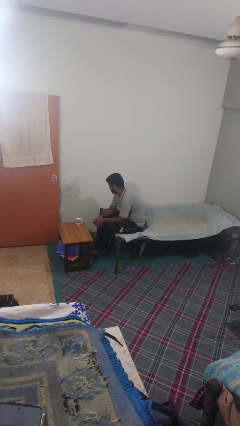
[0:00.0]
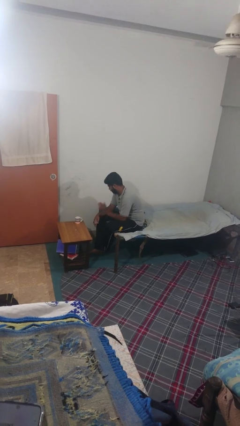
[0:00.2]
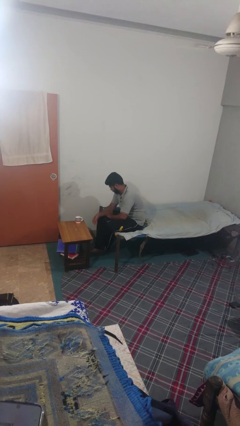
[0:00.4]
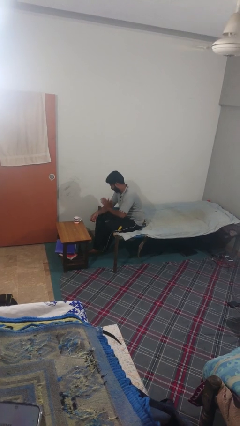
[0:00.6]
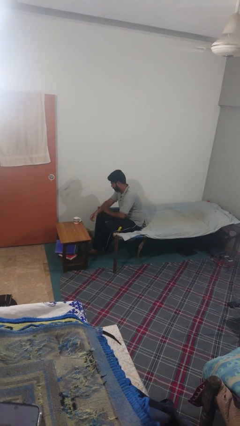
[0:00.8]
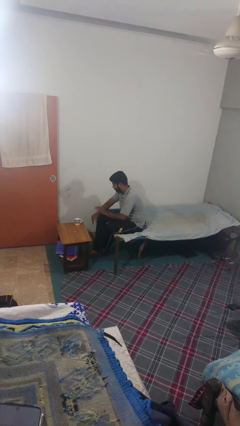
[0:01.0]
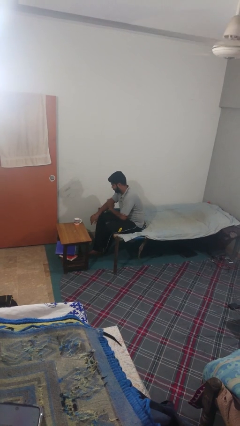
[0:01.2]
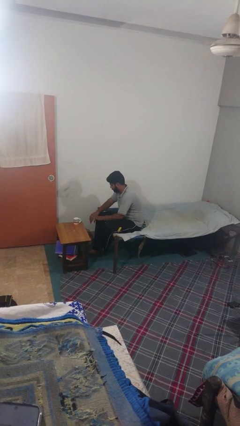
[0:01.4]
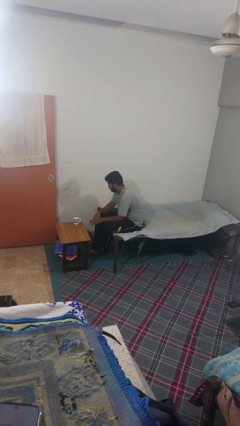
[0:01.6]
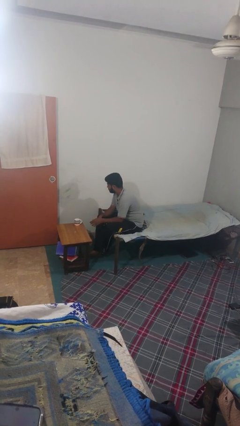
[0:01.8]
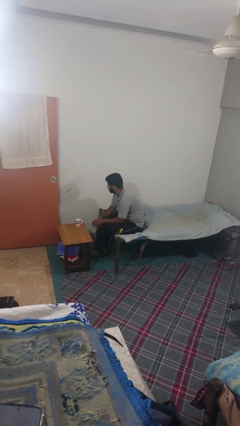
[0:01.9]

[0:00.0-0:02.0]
person swats bug

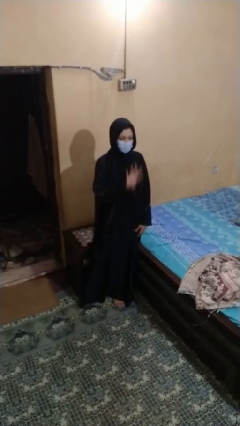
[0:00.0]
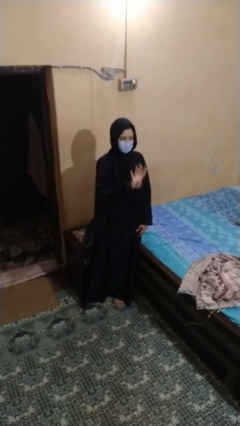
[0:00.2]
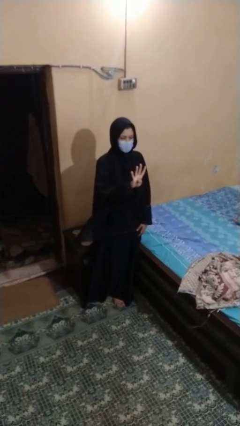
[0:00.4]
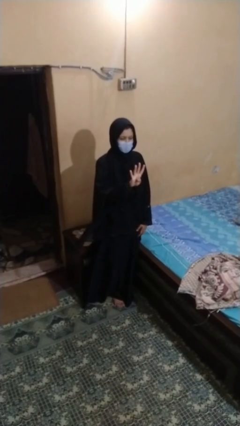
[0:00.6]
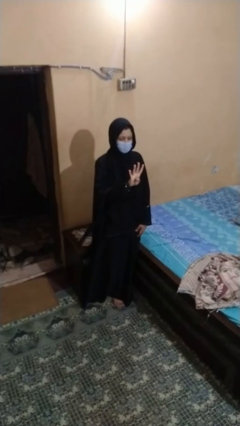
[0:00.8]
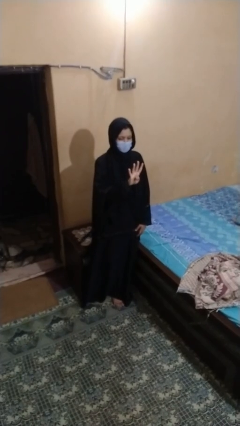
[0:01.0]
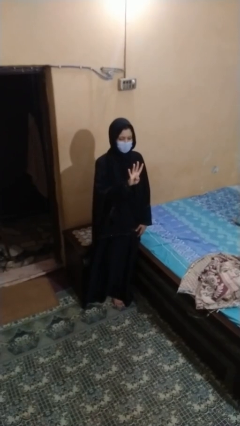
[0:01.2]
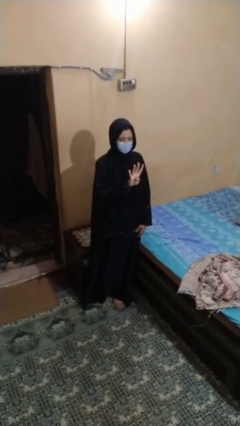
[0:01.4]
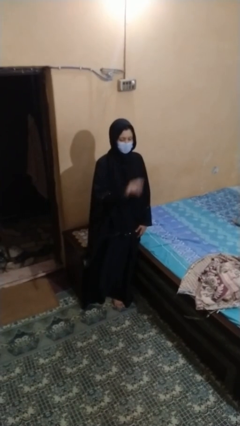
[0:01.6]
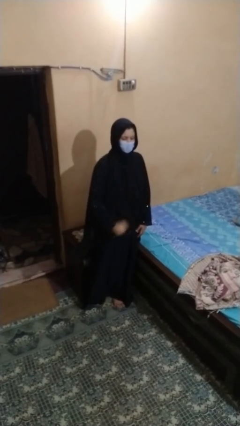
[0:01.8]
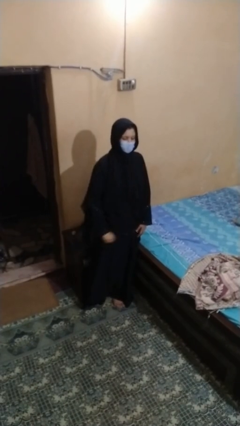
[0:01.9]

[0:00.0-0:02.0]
person gestures number four

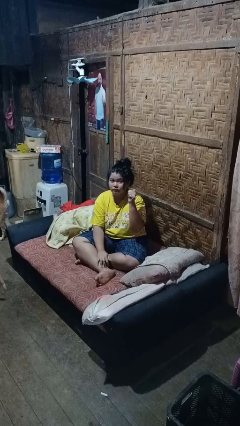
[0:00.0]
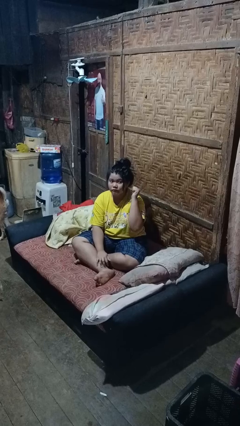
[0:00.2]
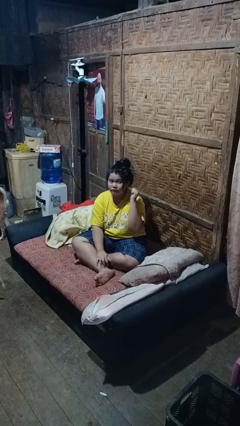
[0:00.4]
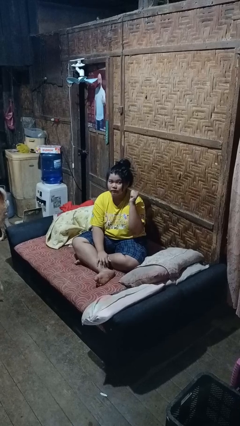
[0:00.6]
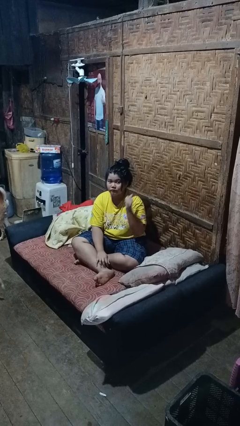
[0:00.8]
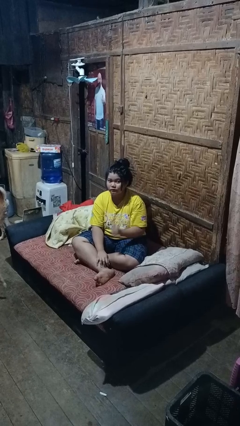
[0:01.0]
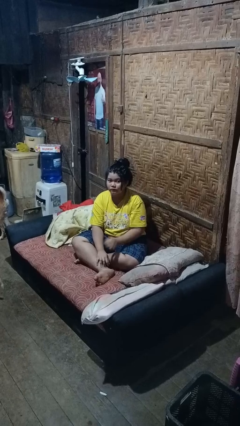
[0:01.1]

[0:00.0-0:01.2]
person gestures behind me

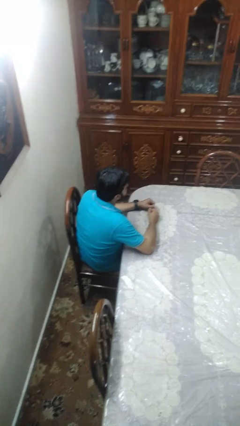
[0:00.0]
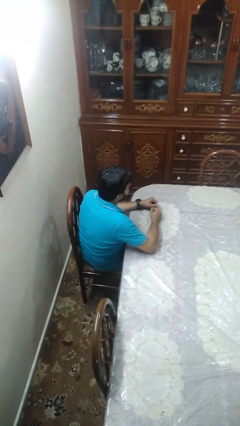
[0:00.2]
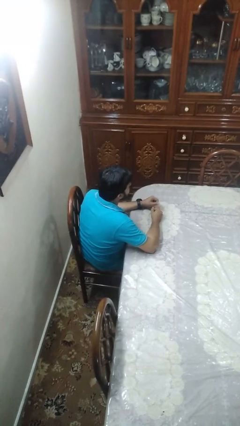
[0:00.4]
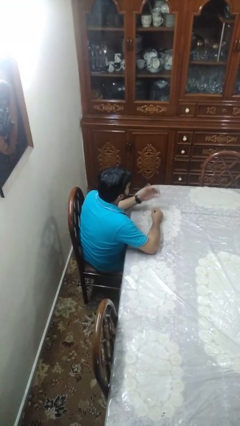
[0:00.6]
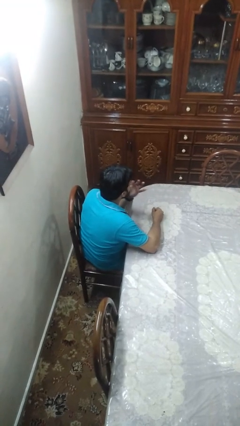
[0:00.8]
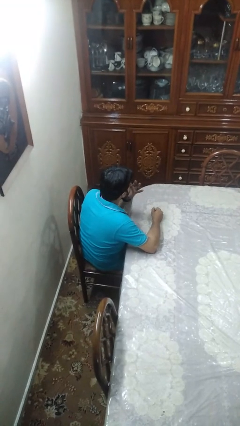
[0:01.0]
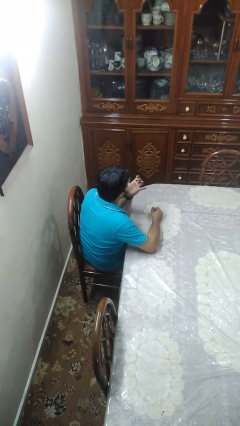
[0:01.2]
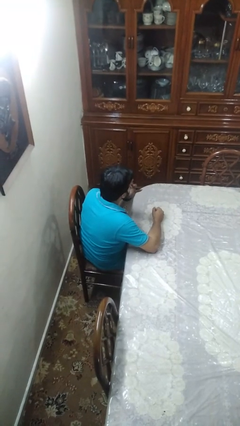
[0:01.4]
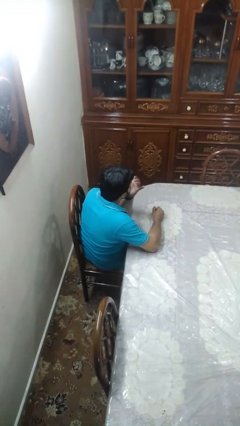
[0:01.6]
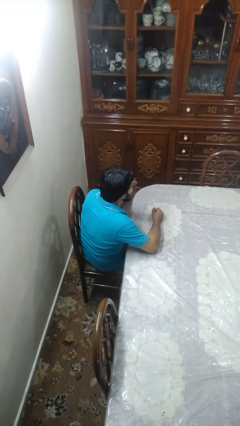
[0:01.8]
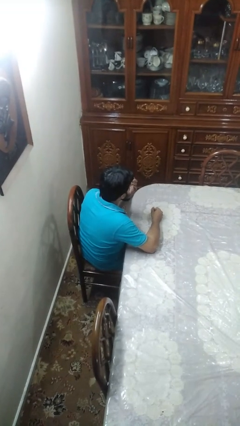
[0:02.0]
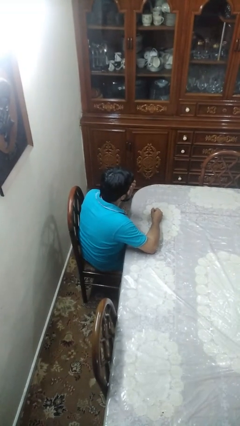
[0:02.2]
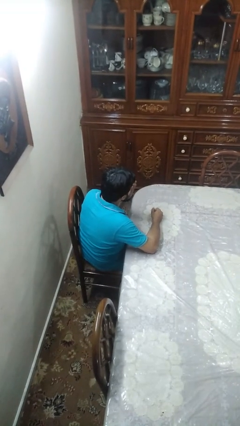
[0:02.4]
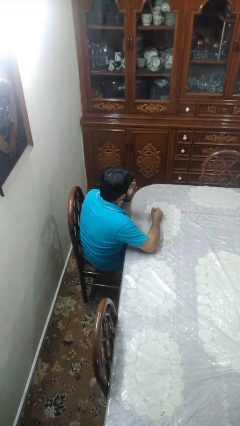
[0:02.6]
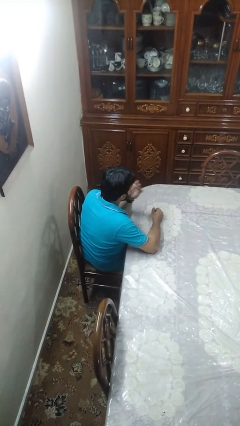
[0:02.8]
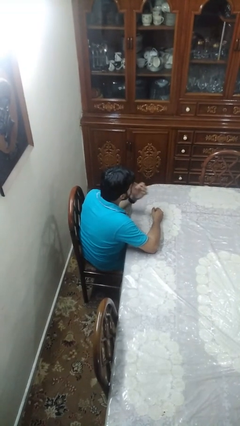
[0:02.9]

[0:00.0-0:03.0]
person licks fingers

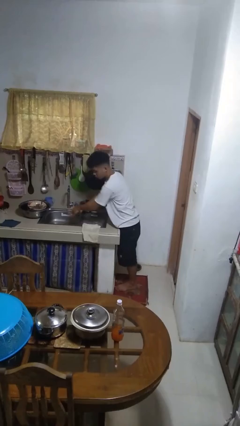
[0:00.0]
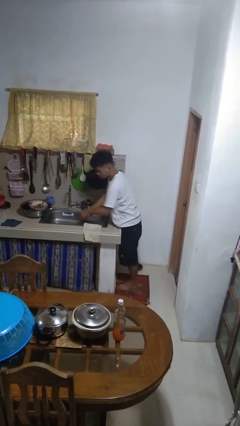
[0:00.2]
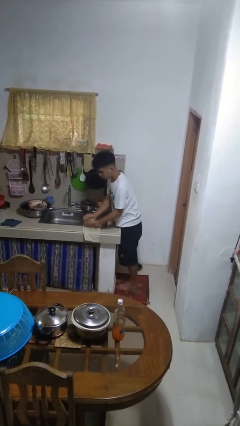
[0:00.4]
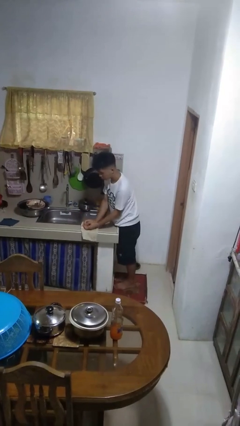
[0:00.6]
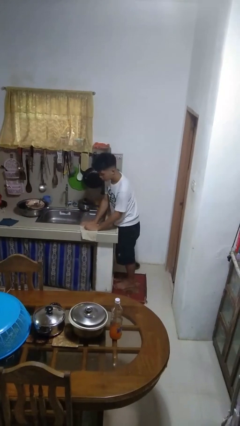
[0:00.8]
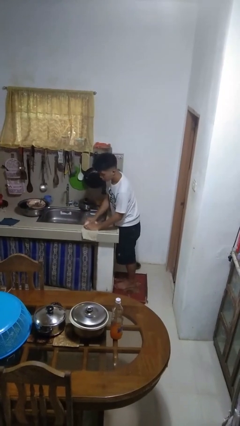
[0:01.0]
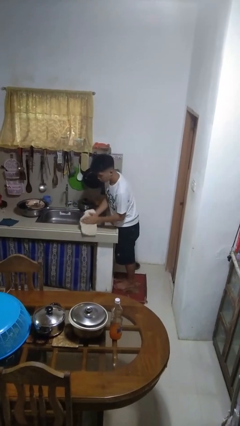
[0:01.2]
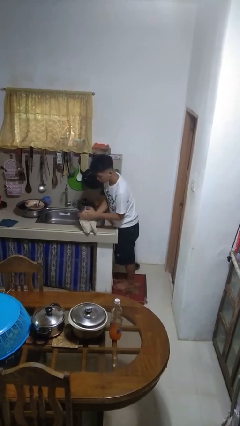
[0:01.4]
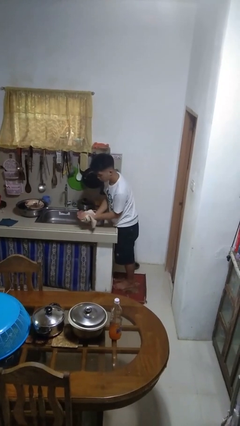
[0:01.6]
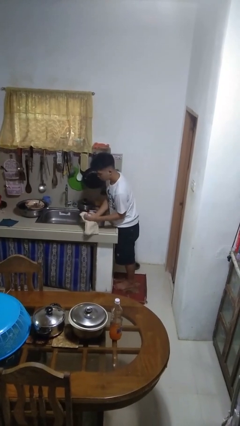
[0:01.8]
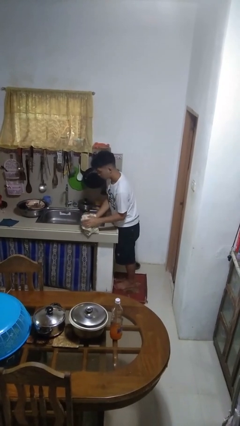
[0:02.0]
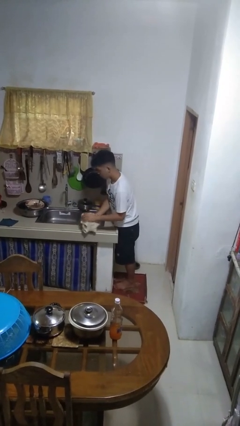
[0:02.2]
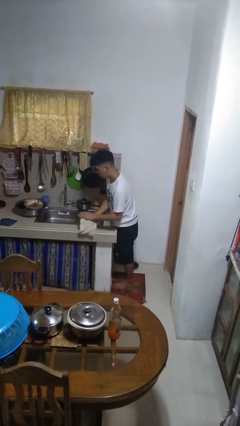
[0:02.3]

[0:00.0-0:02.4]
person dries hands with towel

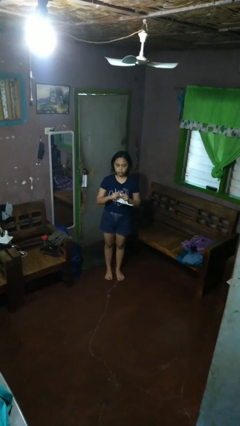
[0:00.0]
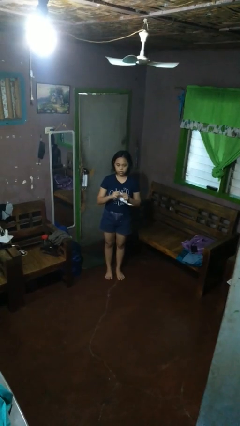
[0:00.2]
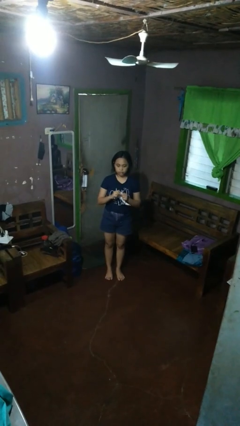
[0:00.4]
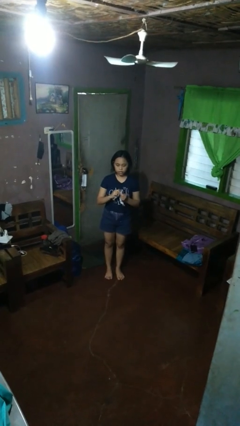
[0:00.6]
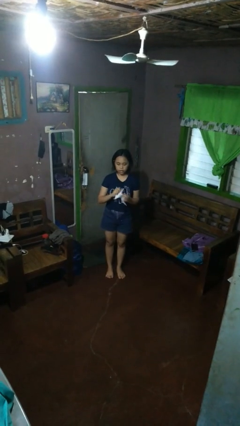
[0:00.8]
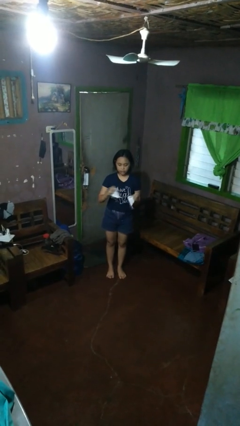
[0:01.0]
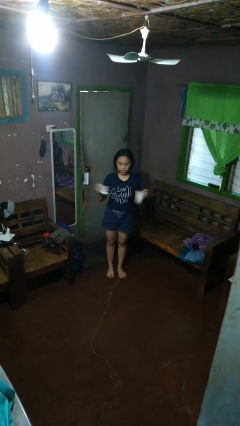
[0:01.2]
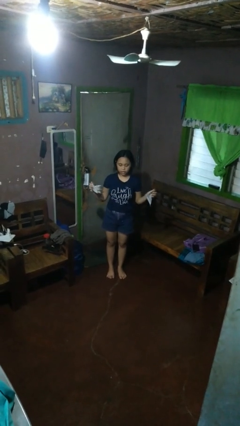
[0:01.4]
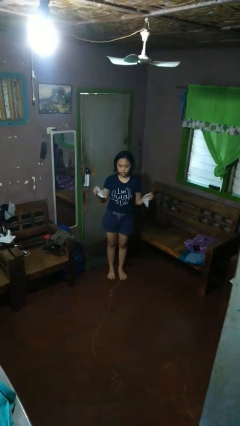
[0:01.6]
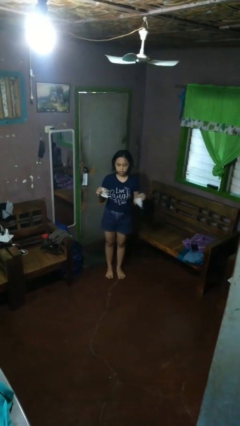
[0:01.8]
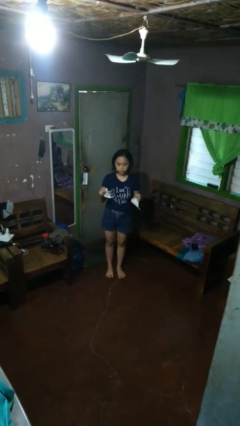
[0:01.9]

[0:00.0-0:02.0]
person tears paper

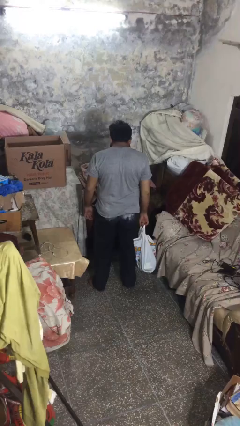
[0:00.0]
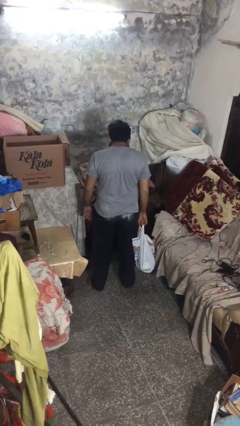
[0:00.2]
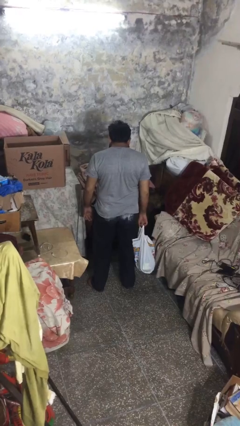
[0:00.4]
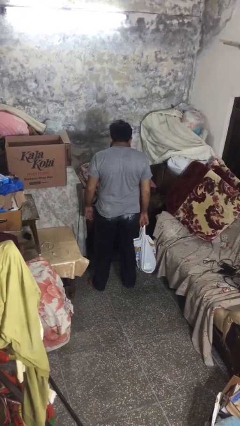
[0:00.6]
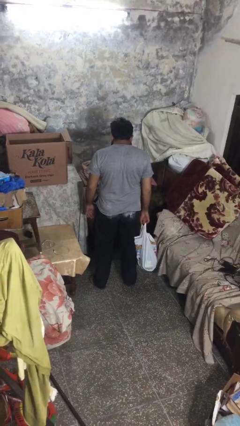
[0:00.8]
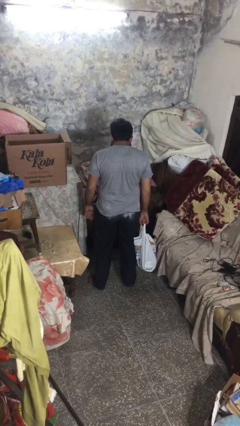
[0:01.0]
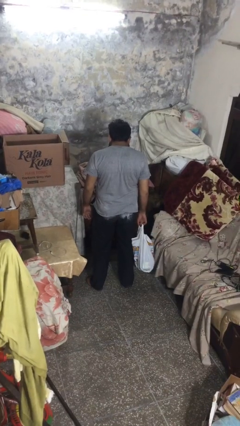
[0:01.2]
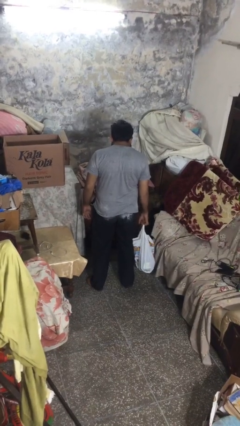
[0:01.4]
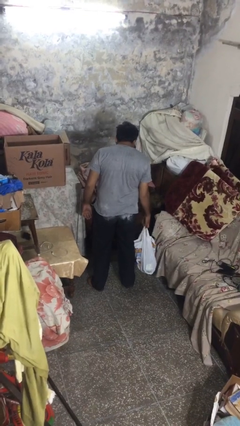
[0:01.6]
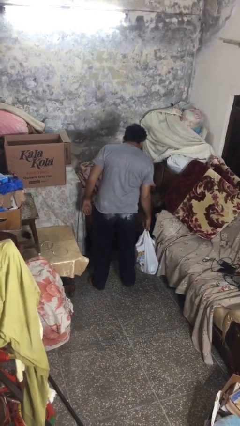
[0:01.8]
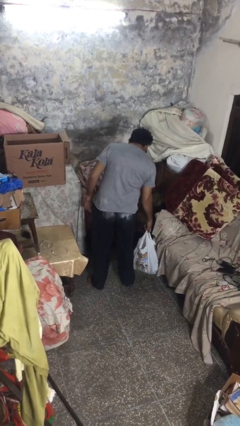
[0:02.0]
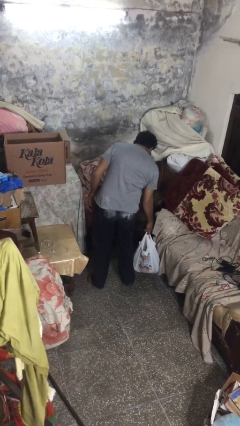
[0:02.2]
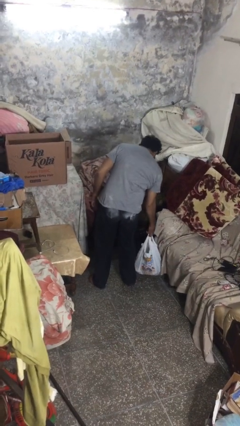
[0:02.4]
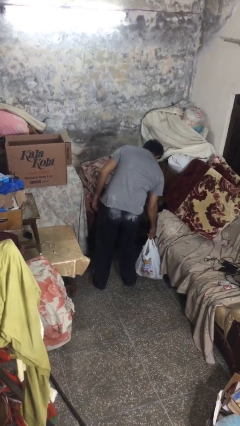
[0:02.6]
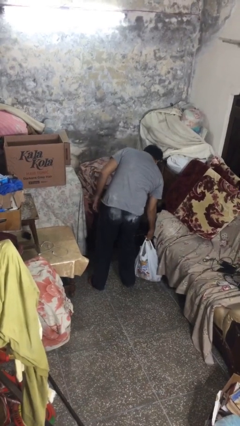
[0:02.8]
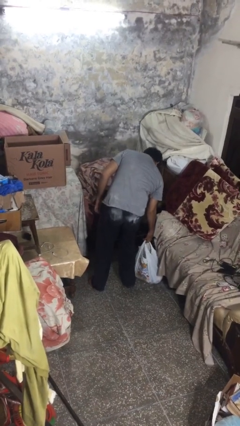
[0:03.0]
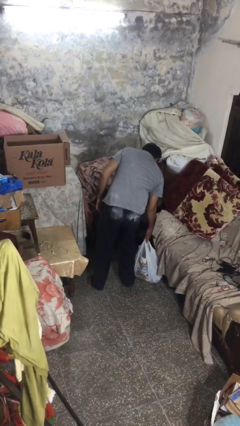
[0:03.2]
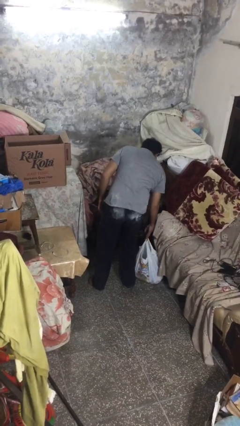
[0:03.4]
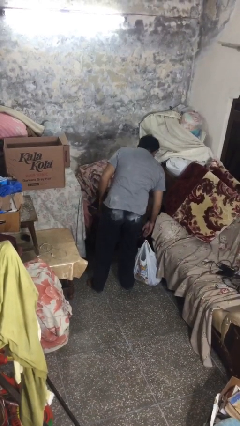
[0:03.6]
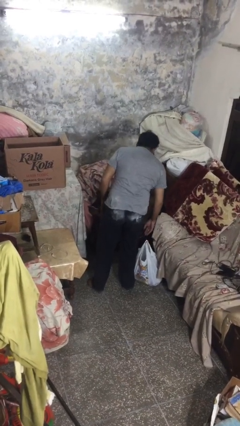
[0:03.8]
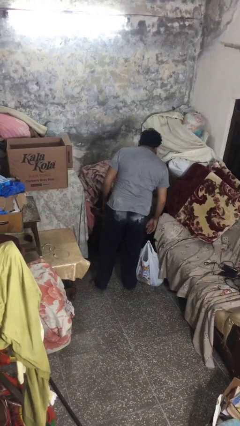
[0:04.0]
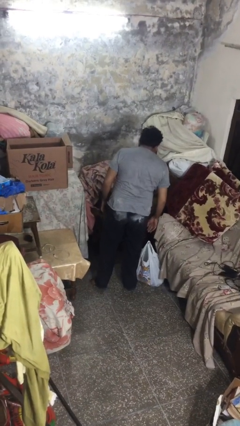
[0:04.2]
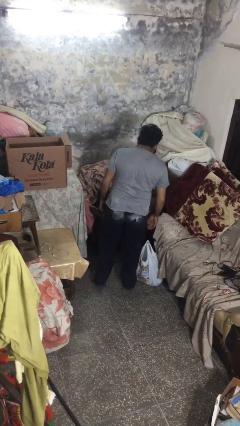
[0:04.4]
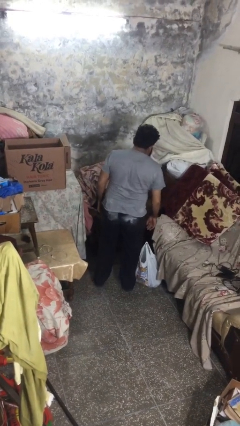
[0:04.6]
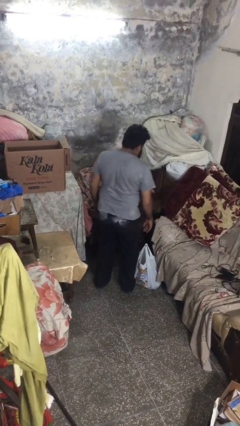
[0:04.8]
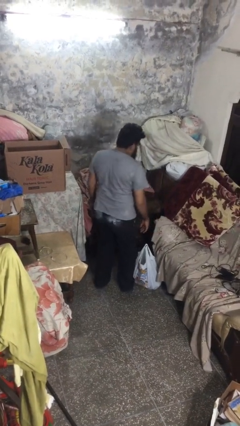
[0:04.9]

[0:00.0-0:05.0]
person puts down object on floor
